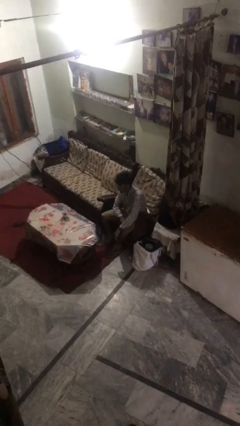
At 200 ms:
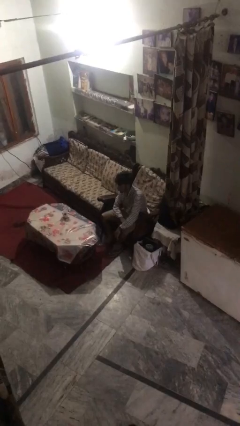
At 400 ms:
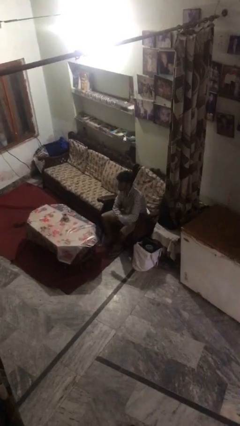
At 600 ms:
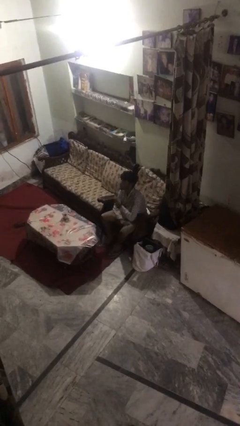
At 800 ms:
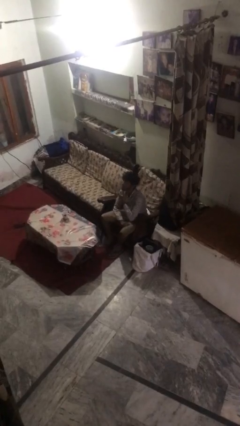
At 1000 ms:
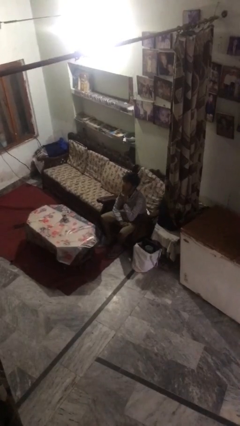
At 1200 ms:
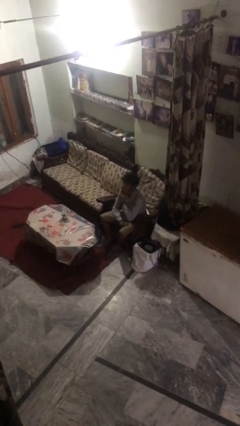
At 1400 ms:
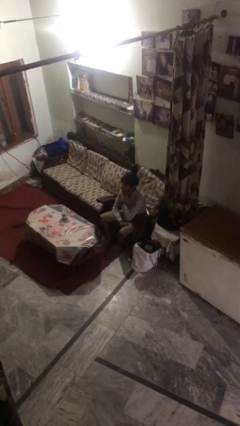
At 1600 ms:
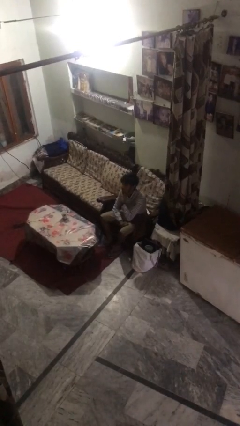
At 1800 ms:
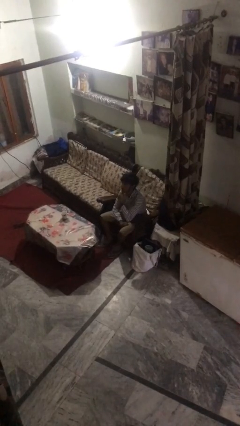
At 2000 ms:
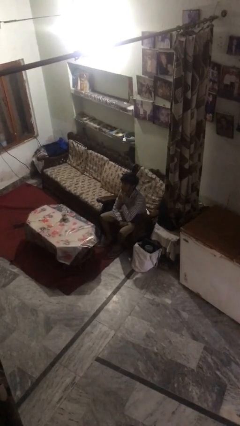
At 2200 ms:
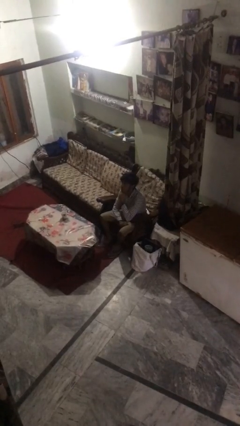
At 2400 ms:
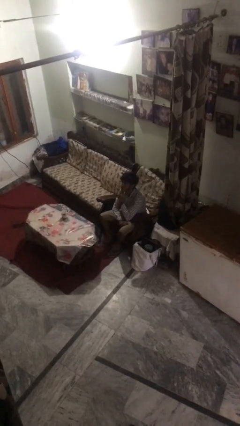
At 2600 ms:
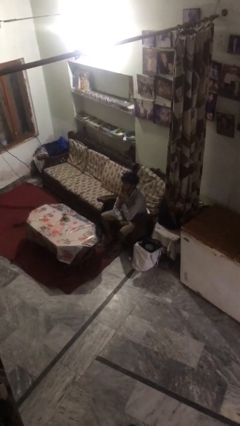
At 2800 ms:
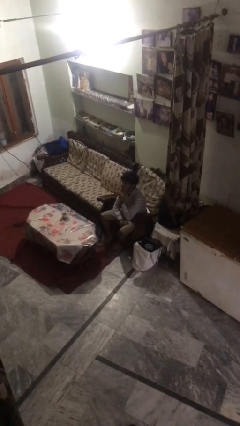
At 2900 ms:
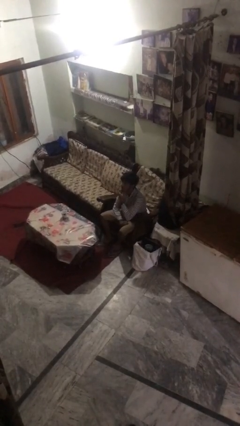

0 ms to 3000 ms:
person strokes chin

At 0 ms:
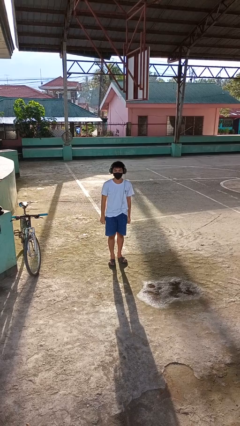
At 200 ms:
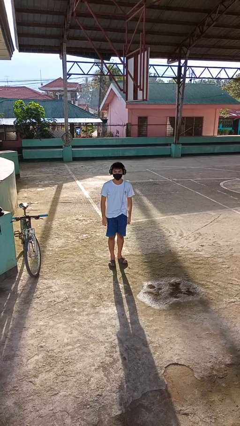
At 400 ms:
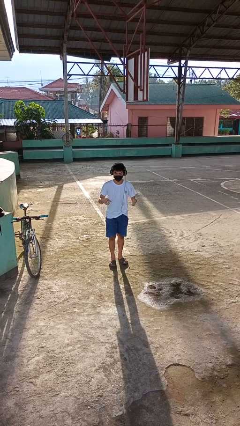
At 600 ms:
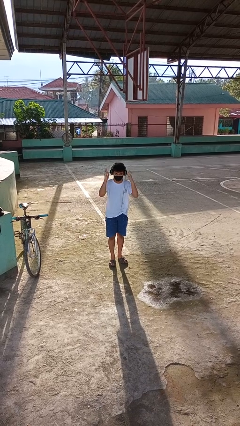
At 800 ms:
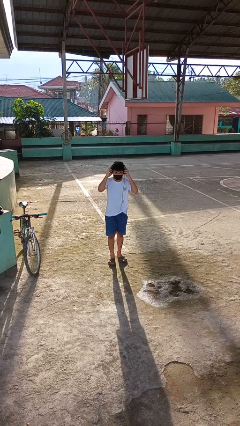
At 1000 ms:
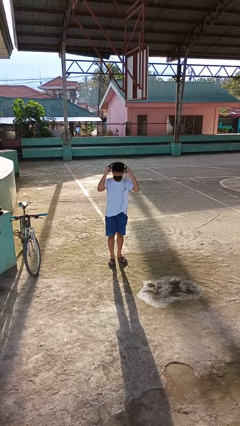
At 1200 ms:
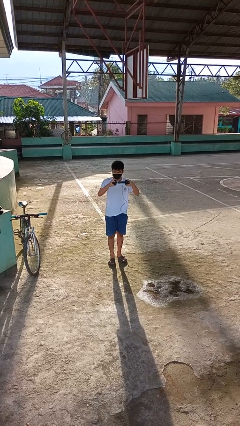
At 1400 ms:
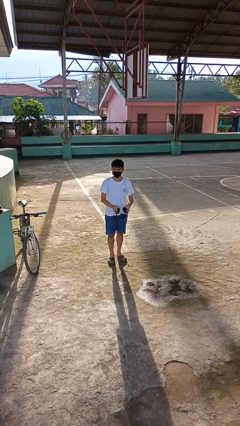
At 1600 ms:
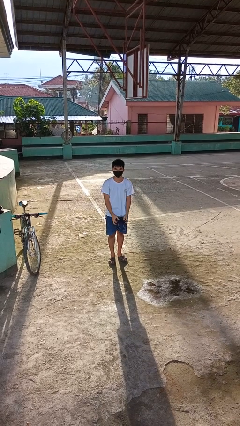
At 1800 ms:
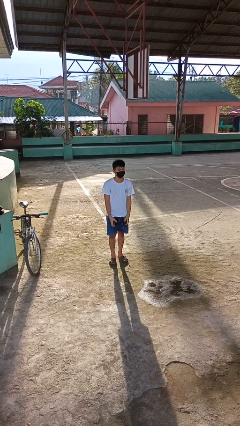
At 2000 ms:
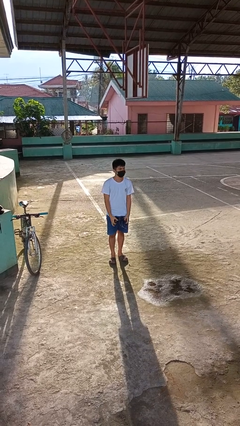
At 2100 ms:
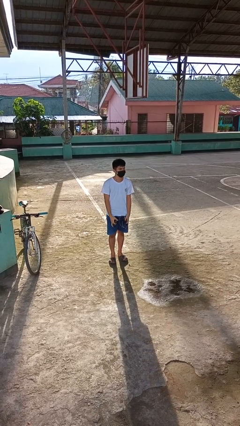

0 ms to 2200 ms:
person takes off headphones

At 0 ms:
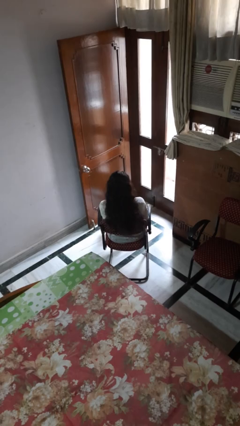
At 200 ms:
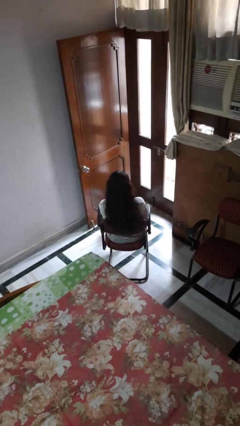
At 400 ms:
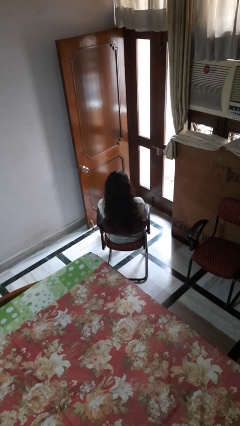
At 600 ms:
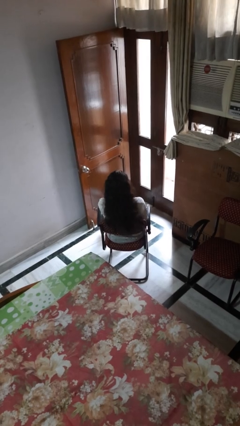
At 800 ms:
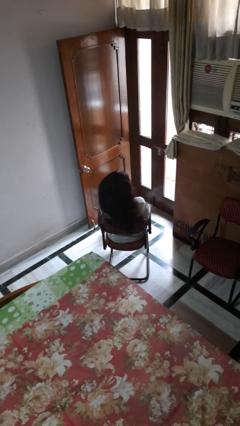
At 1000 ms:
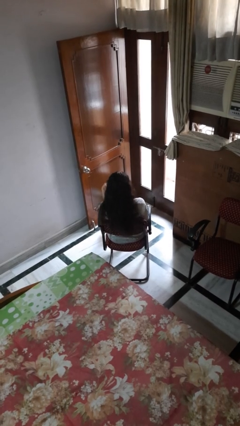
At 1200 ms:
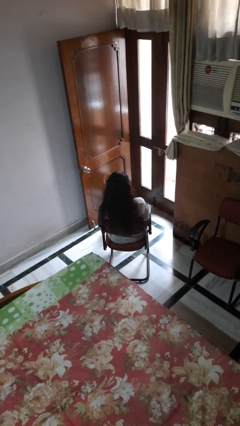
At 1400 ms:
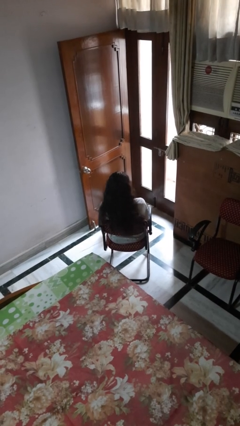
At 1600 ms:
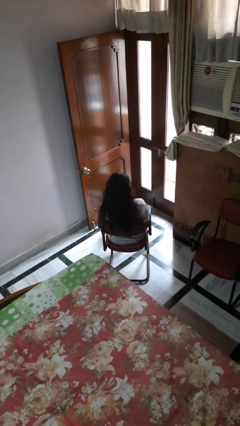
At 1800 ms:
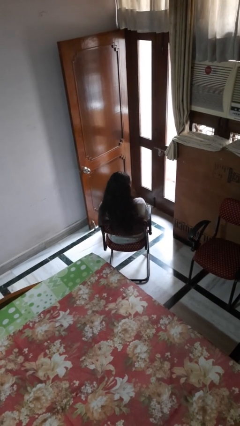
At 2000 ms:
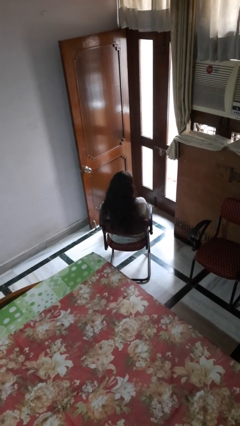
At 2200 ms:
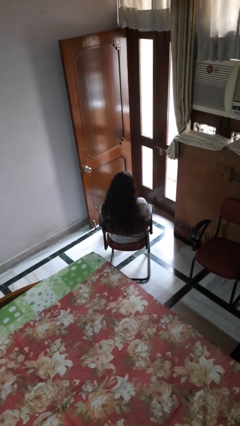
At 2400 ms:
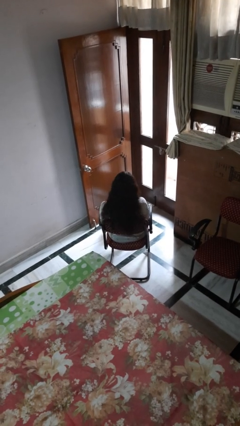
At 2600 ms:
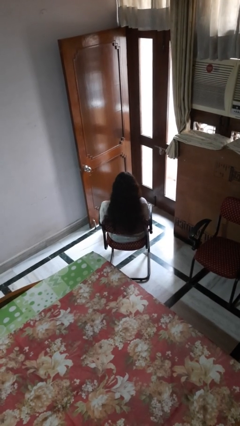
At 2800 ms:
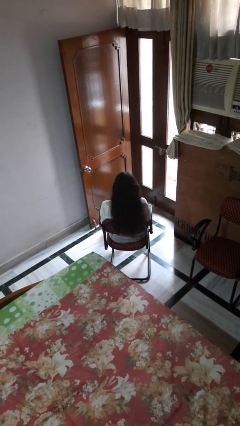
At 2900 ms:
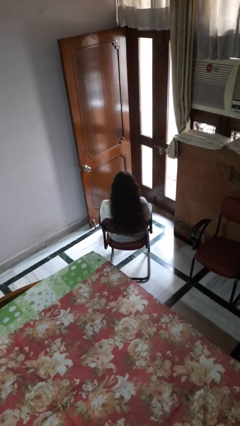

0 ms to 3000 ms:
person strokes hair

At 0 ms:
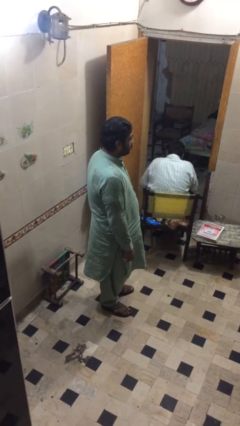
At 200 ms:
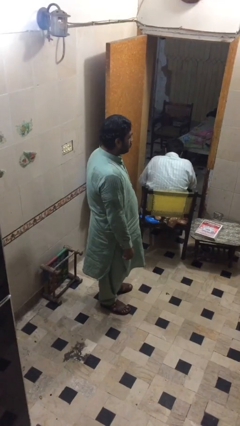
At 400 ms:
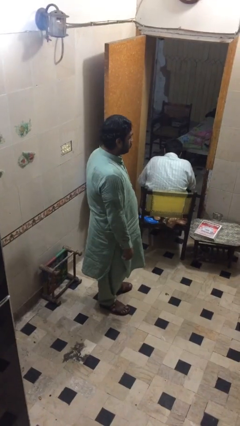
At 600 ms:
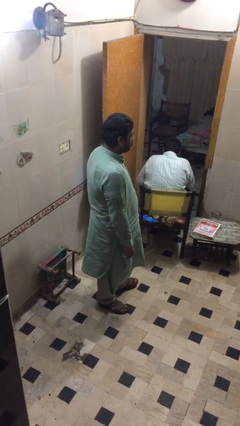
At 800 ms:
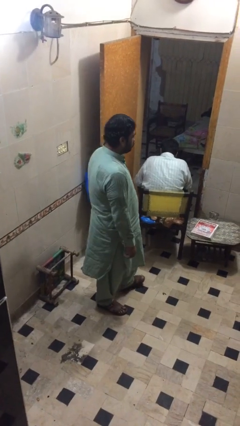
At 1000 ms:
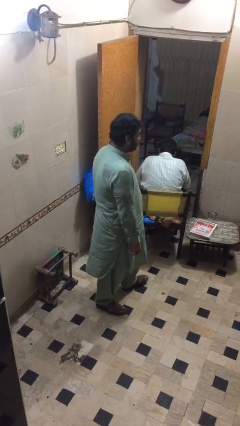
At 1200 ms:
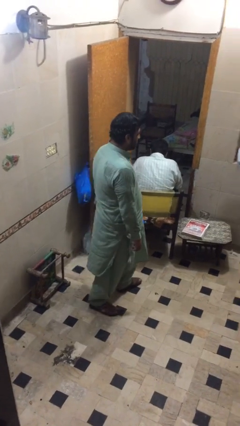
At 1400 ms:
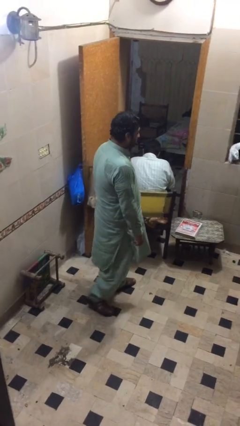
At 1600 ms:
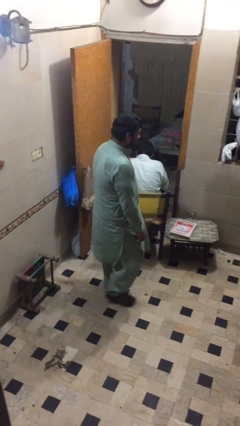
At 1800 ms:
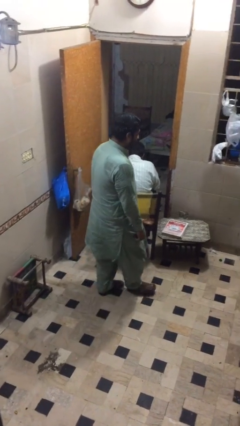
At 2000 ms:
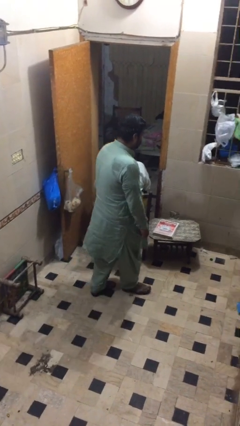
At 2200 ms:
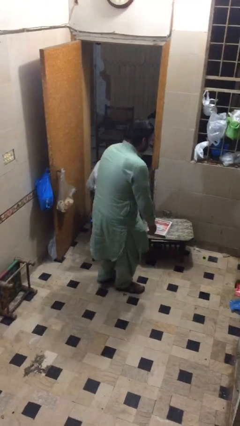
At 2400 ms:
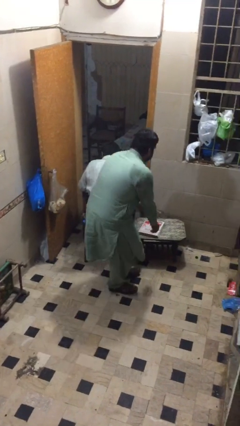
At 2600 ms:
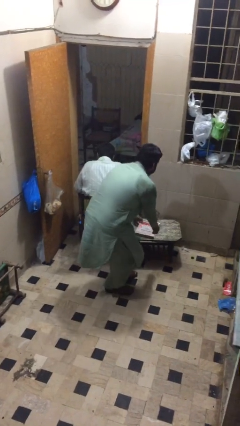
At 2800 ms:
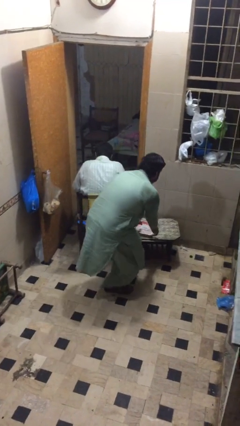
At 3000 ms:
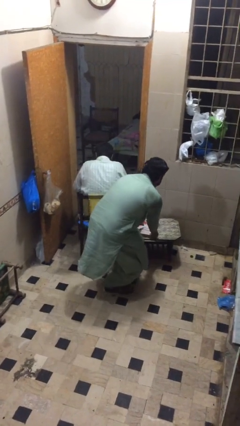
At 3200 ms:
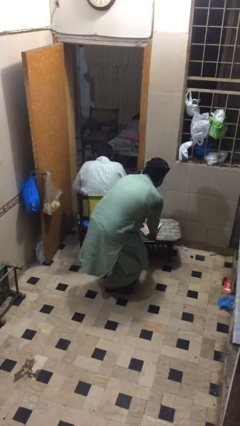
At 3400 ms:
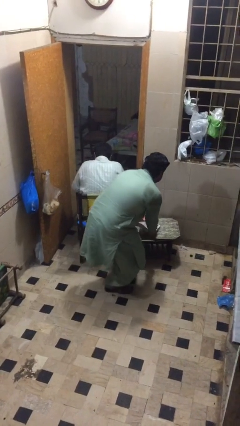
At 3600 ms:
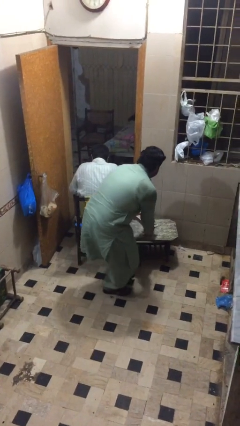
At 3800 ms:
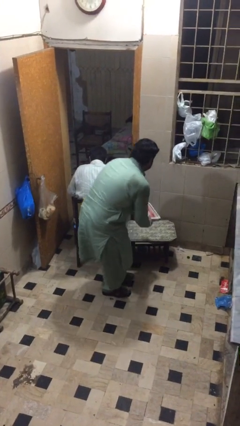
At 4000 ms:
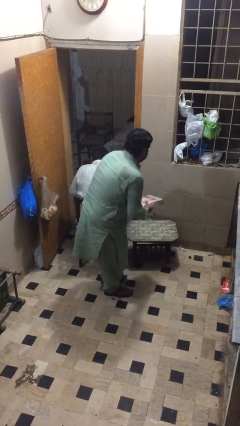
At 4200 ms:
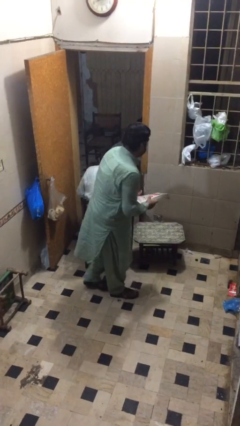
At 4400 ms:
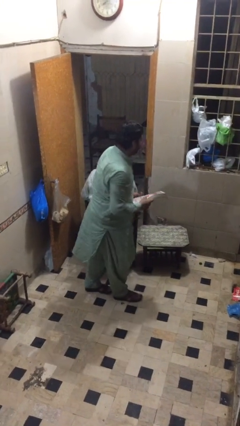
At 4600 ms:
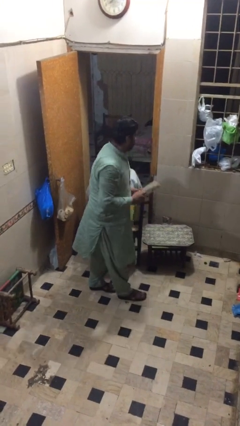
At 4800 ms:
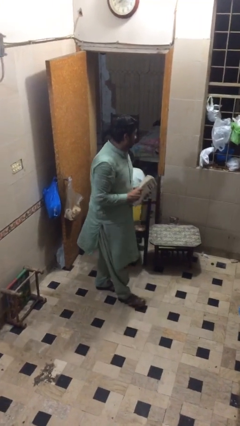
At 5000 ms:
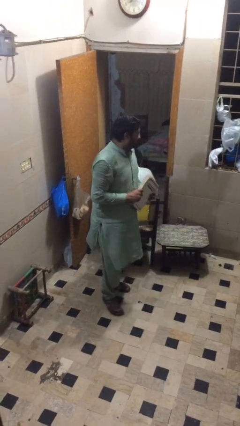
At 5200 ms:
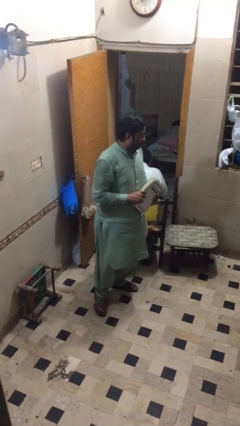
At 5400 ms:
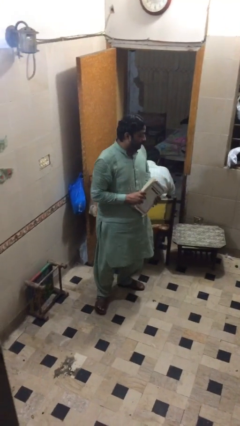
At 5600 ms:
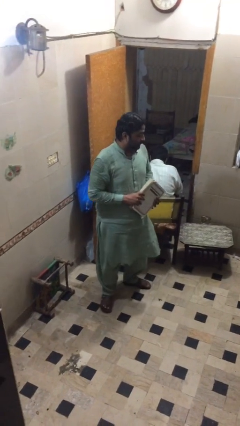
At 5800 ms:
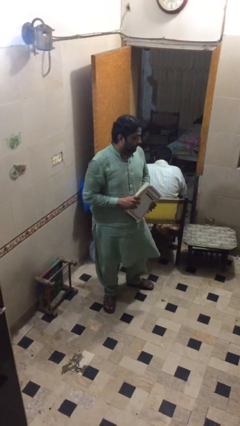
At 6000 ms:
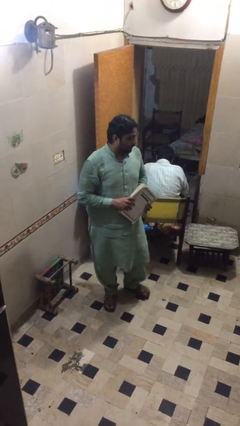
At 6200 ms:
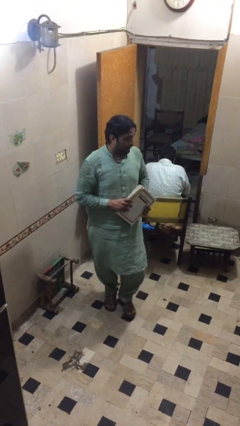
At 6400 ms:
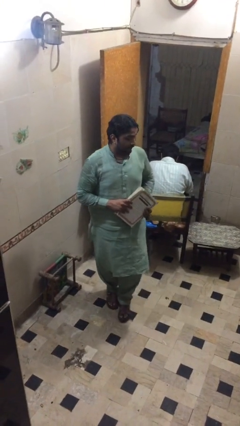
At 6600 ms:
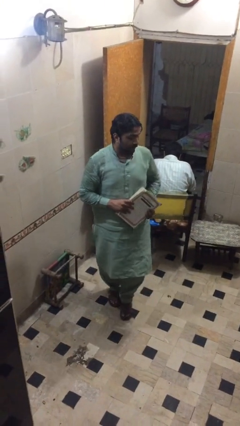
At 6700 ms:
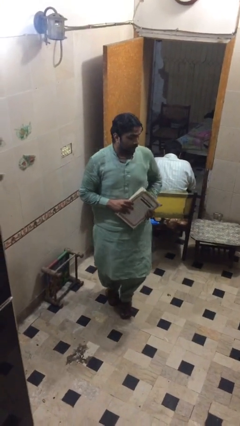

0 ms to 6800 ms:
person steals object from person

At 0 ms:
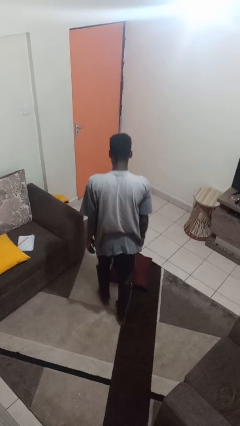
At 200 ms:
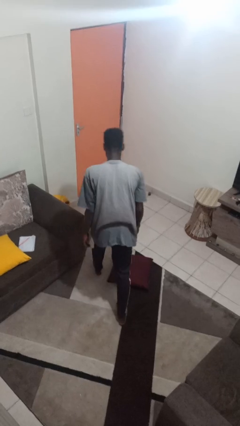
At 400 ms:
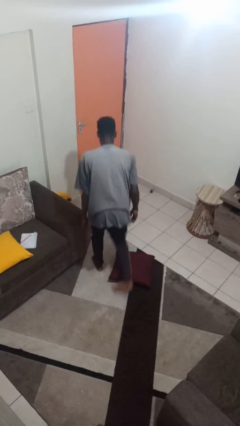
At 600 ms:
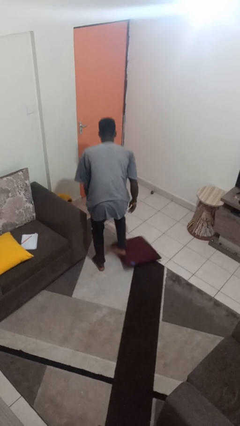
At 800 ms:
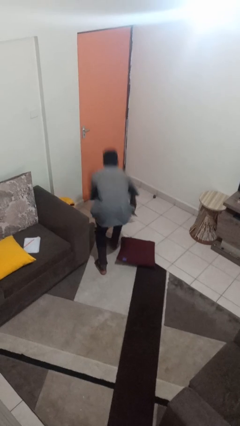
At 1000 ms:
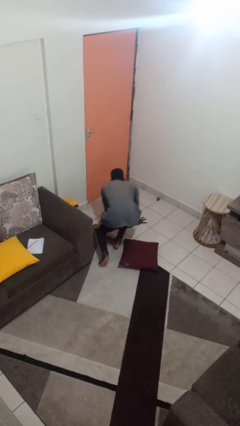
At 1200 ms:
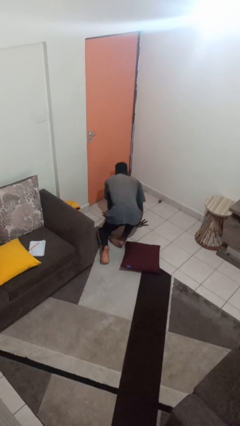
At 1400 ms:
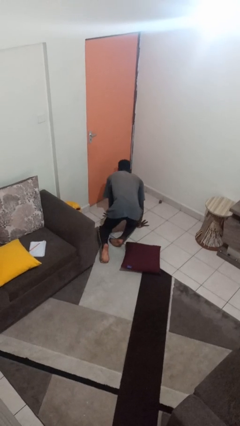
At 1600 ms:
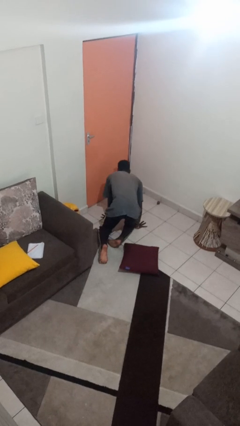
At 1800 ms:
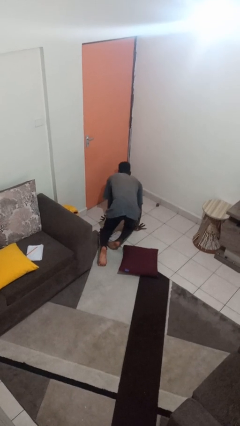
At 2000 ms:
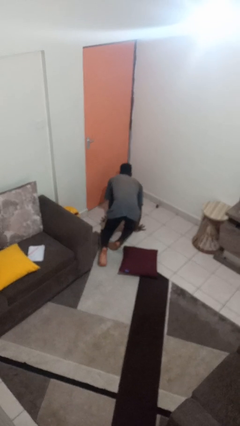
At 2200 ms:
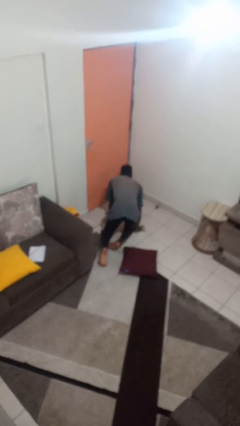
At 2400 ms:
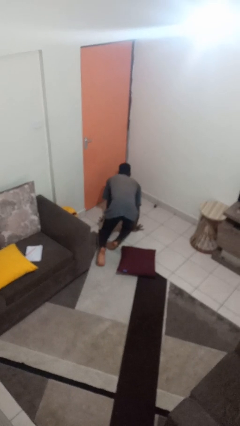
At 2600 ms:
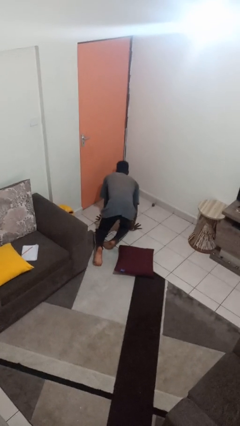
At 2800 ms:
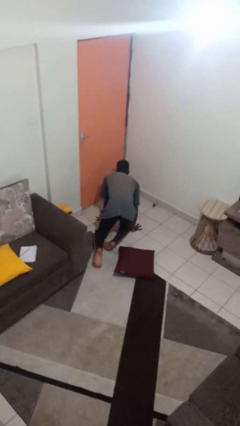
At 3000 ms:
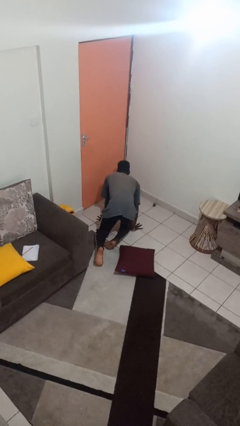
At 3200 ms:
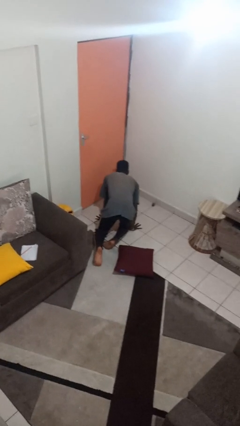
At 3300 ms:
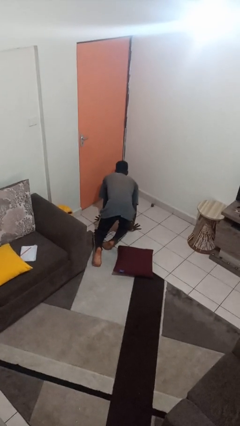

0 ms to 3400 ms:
person trips on object on floor
